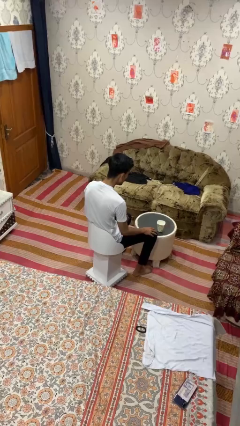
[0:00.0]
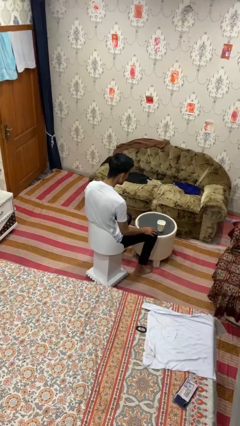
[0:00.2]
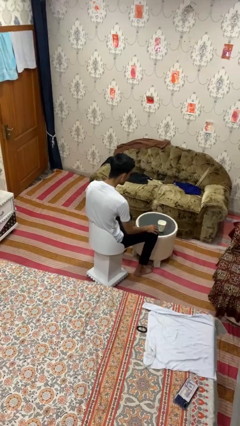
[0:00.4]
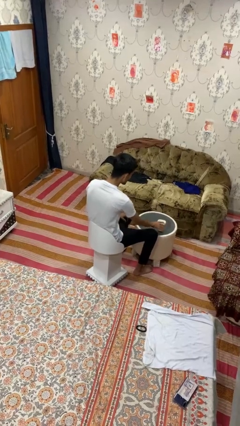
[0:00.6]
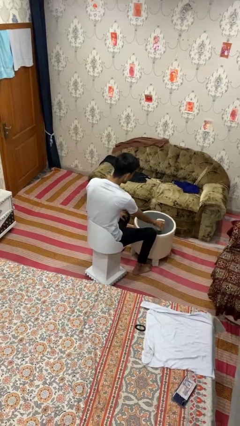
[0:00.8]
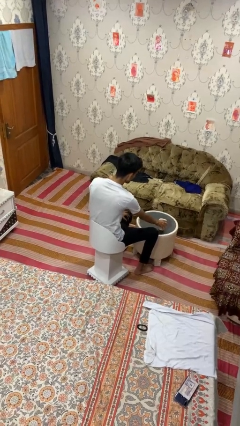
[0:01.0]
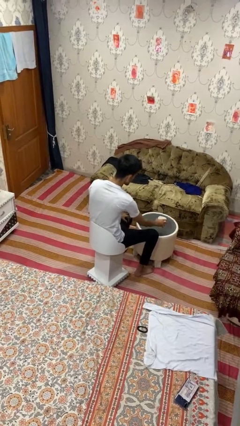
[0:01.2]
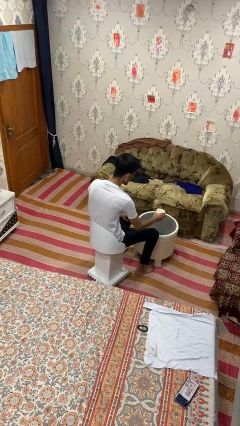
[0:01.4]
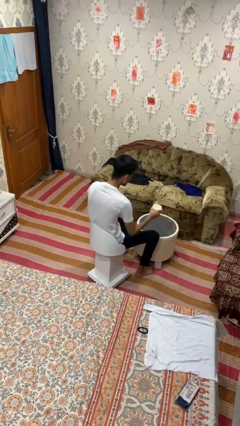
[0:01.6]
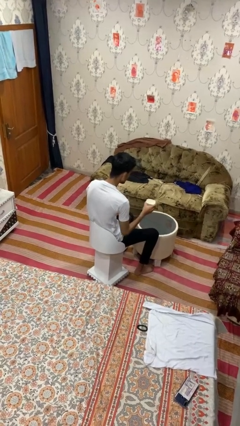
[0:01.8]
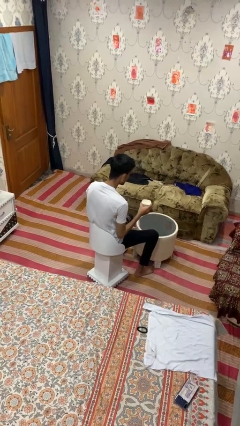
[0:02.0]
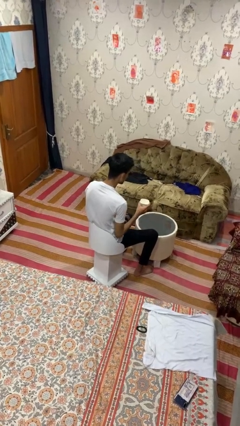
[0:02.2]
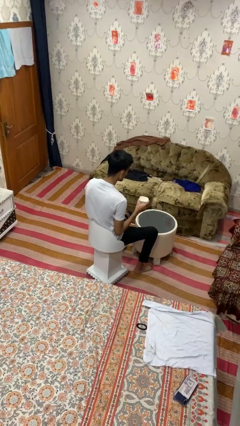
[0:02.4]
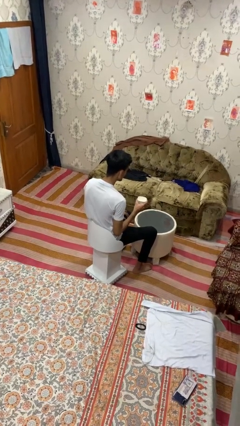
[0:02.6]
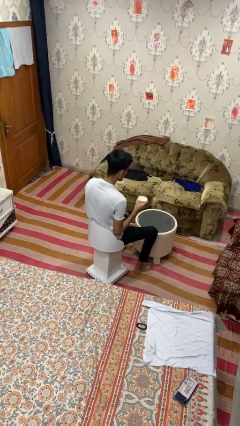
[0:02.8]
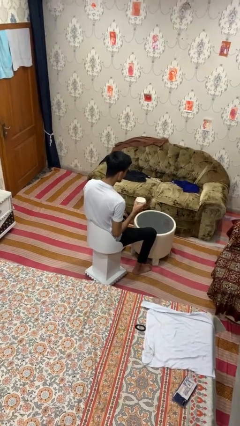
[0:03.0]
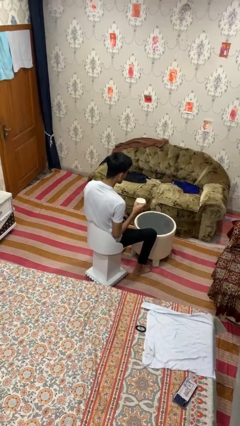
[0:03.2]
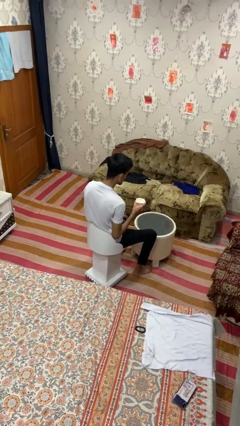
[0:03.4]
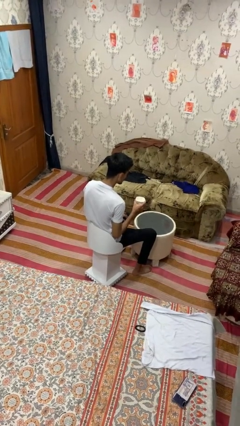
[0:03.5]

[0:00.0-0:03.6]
person picks up object from table

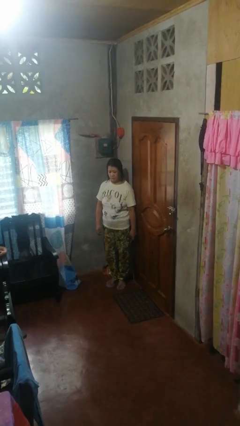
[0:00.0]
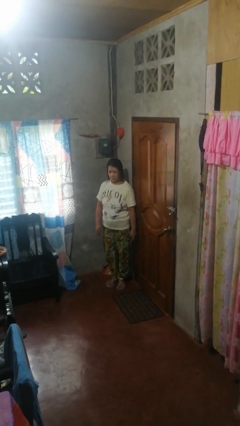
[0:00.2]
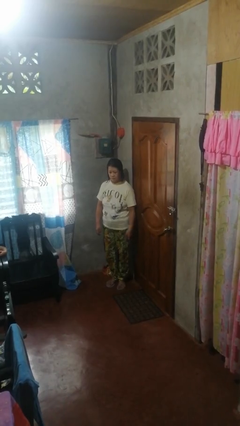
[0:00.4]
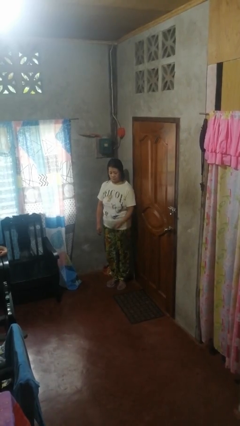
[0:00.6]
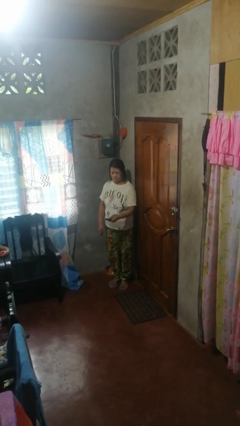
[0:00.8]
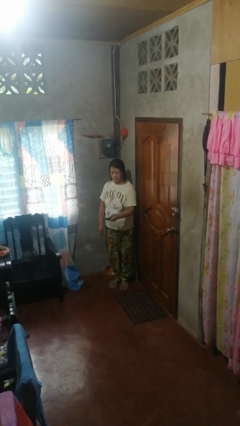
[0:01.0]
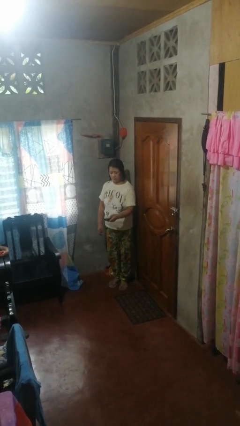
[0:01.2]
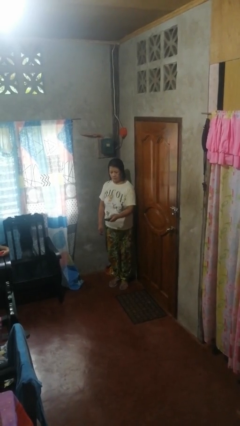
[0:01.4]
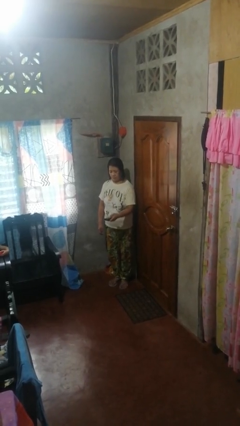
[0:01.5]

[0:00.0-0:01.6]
person uses television remote

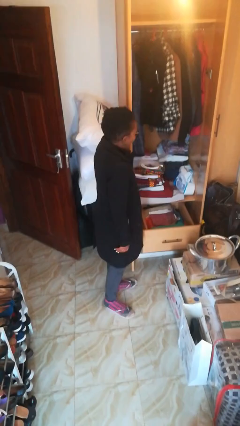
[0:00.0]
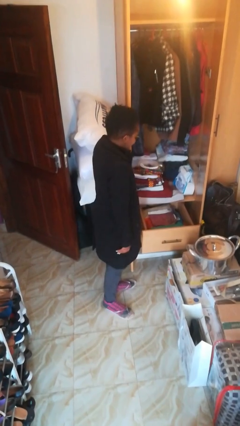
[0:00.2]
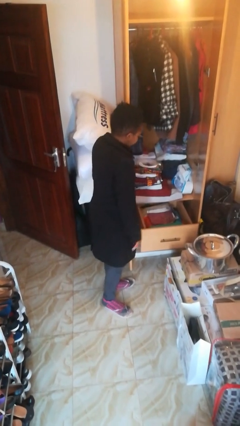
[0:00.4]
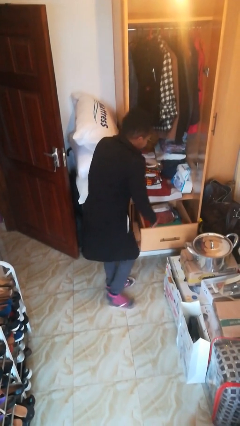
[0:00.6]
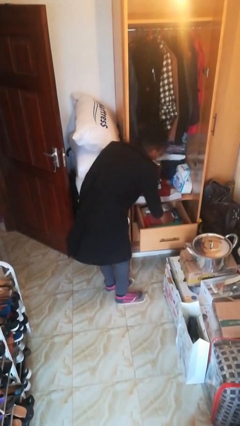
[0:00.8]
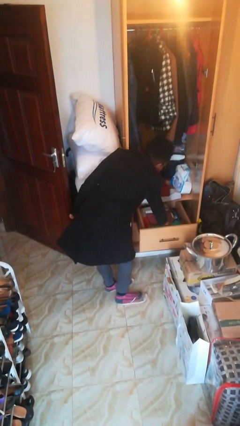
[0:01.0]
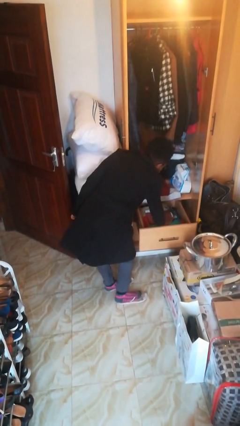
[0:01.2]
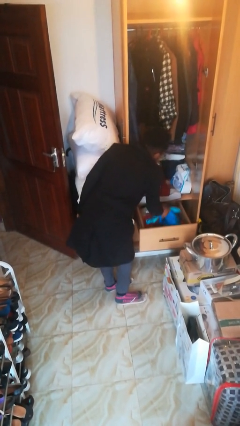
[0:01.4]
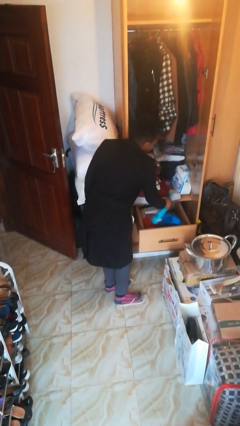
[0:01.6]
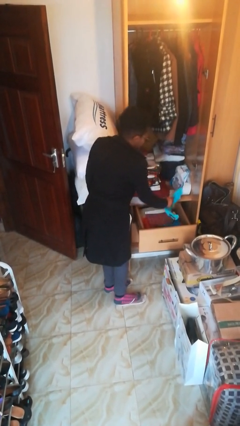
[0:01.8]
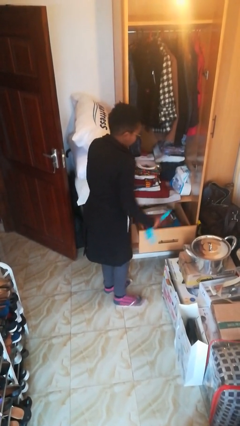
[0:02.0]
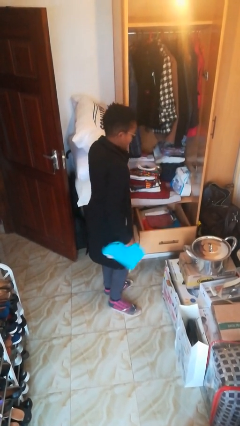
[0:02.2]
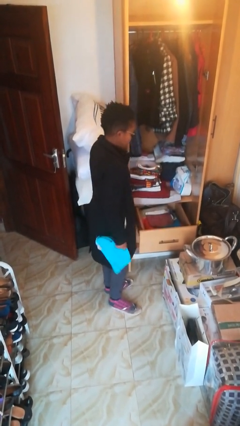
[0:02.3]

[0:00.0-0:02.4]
person takes clothes from dresser

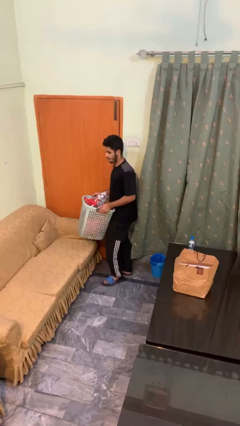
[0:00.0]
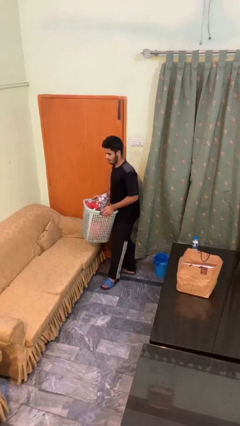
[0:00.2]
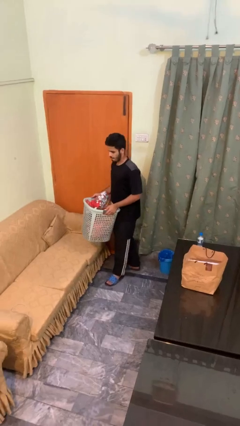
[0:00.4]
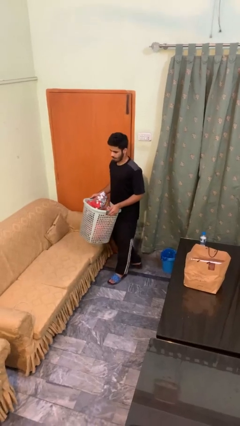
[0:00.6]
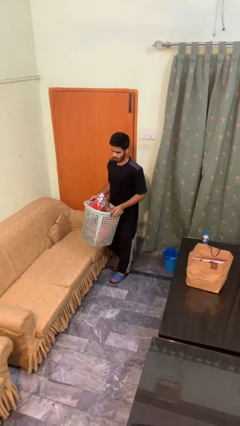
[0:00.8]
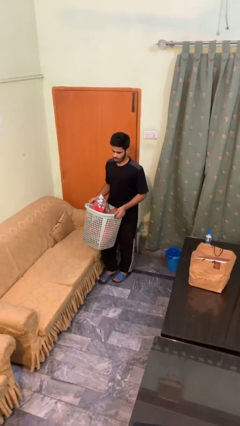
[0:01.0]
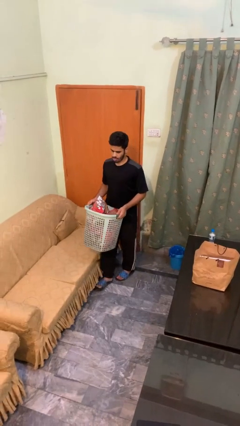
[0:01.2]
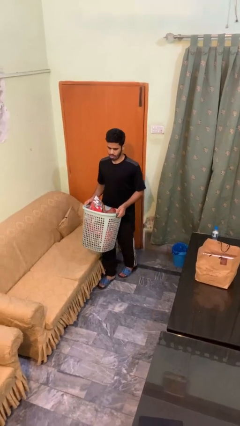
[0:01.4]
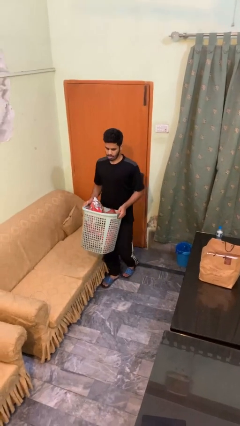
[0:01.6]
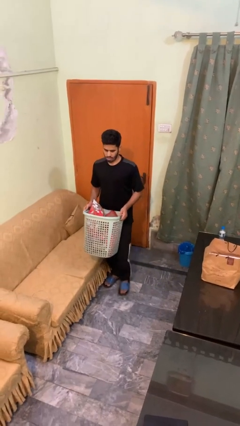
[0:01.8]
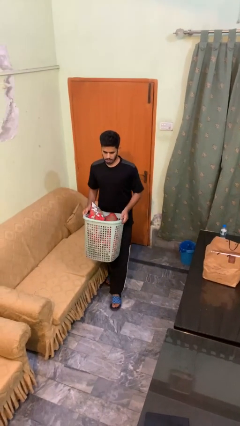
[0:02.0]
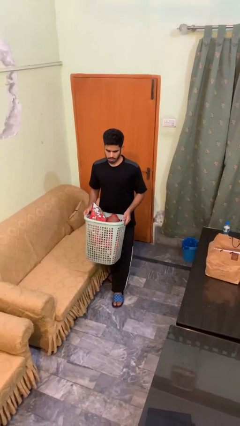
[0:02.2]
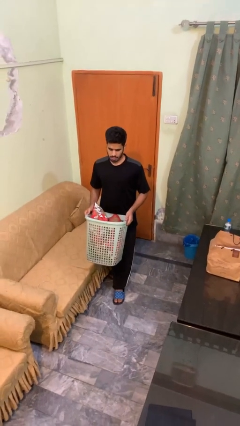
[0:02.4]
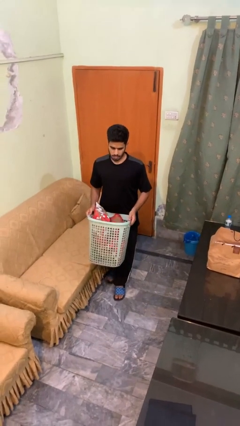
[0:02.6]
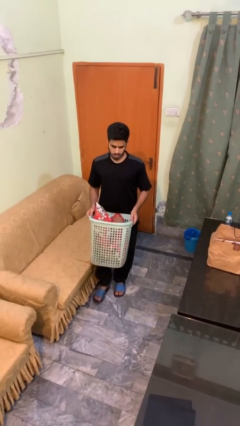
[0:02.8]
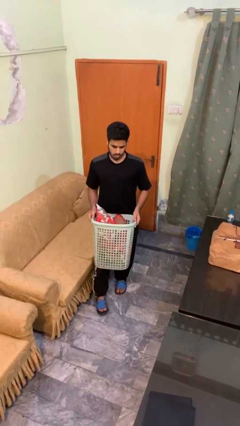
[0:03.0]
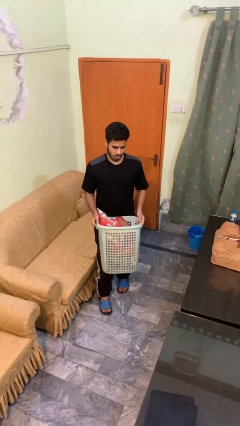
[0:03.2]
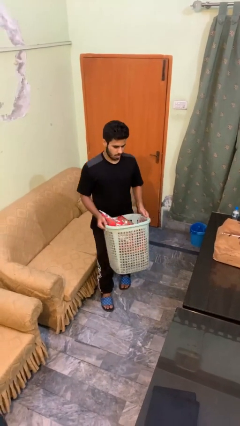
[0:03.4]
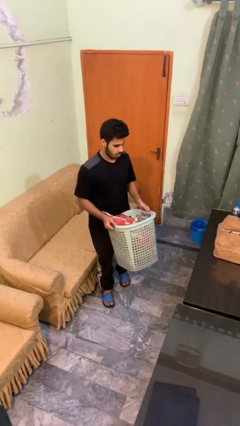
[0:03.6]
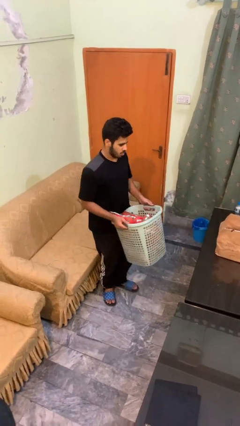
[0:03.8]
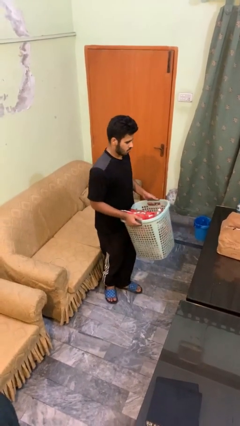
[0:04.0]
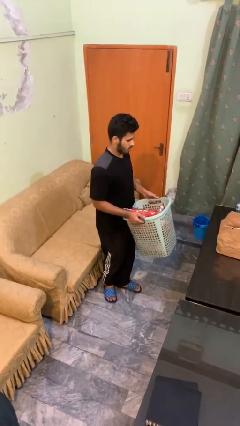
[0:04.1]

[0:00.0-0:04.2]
person carries laundry basket

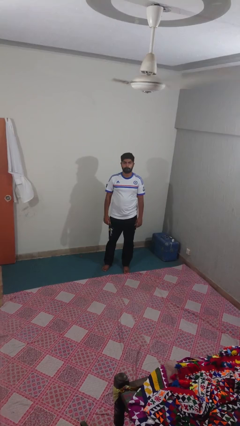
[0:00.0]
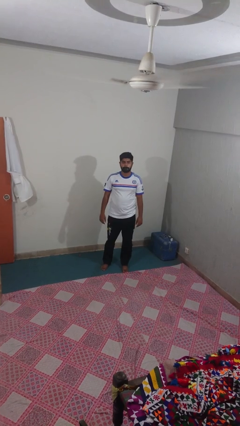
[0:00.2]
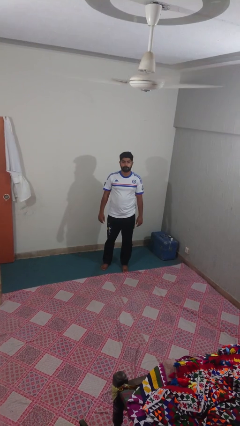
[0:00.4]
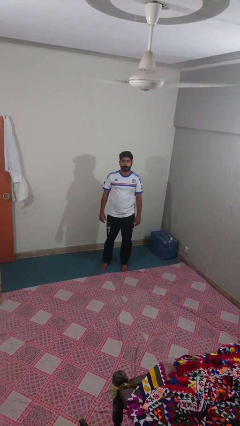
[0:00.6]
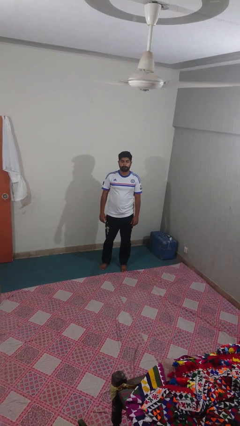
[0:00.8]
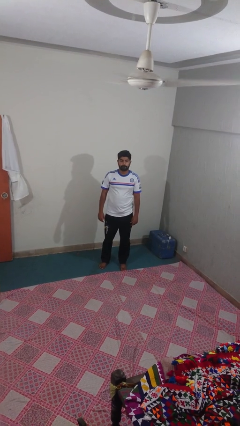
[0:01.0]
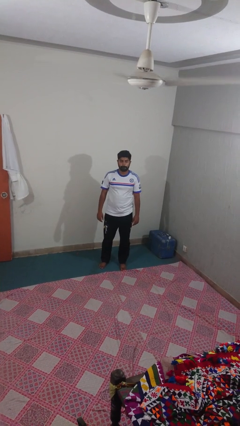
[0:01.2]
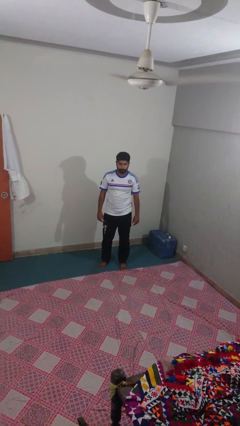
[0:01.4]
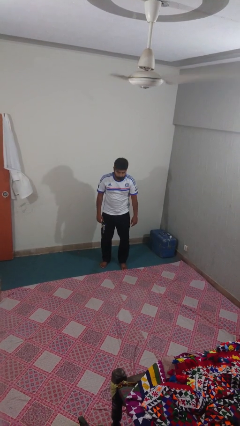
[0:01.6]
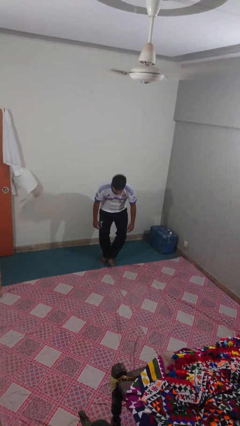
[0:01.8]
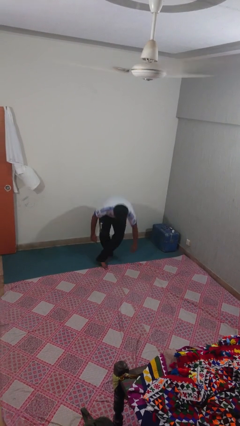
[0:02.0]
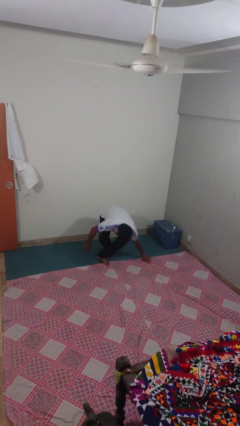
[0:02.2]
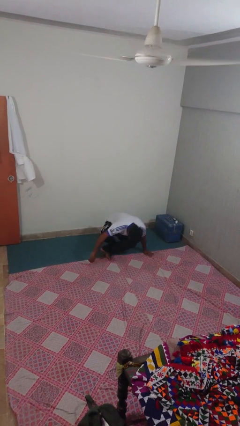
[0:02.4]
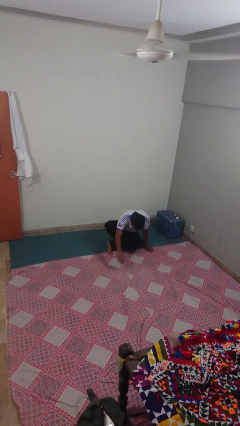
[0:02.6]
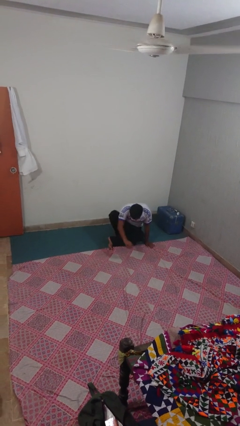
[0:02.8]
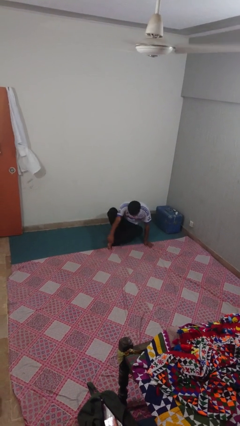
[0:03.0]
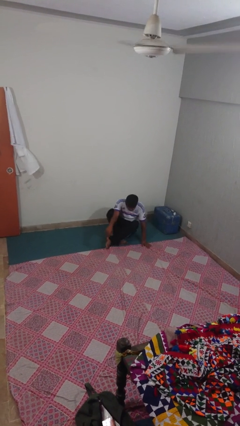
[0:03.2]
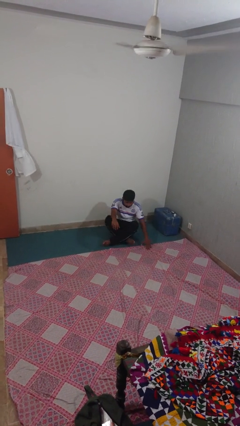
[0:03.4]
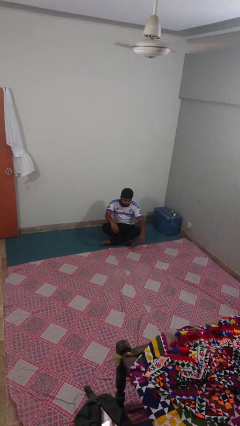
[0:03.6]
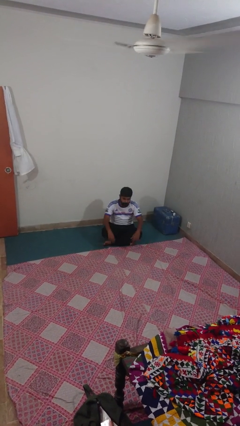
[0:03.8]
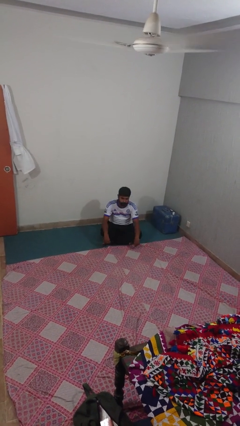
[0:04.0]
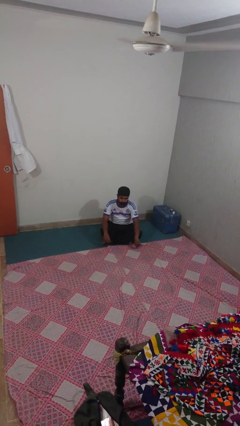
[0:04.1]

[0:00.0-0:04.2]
person sits crisscross

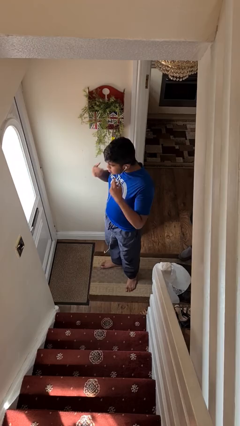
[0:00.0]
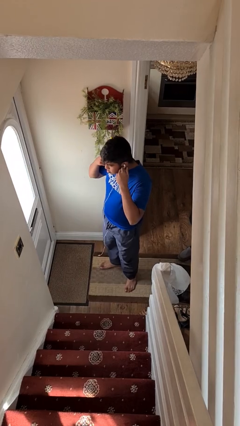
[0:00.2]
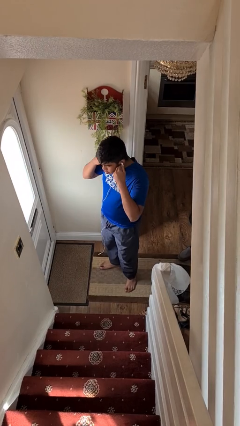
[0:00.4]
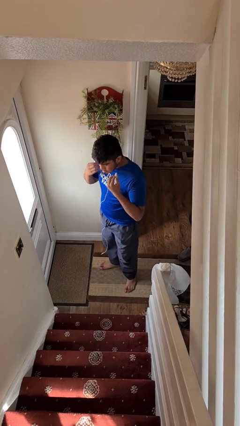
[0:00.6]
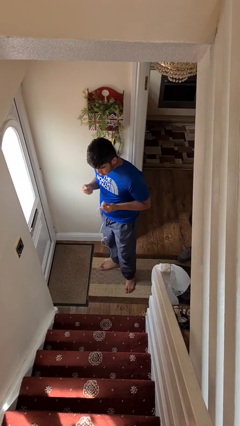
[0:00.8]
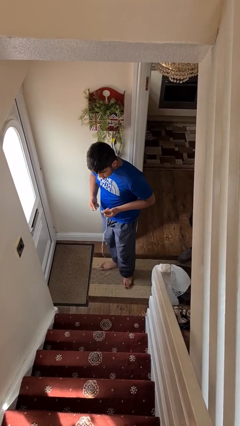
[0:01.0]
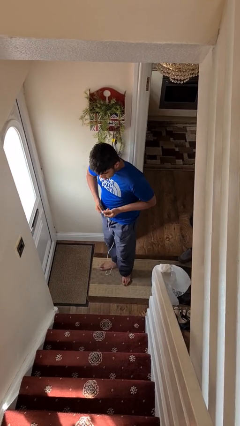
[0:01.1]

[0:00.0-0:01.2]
person takes off headphones

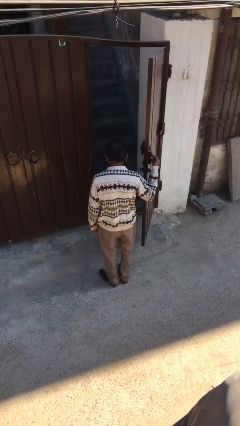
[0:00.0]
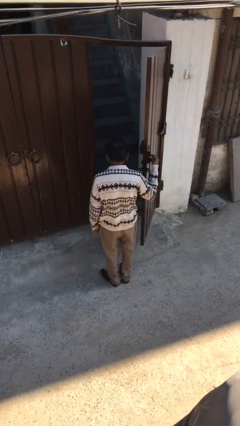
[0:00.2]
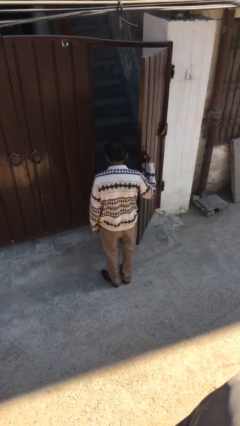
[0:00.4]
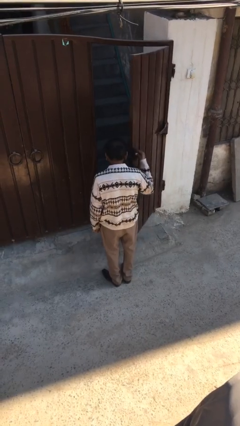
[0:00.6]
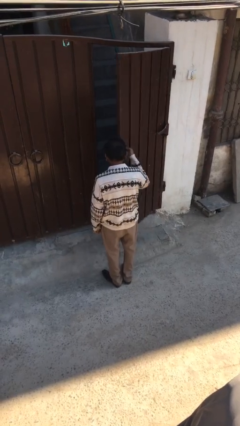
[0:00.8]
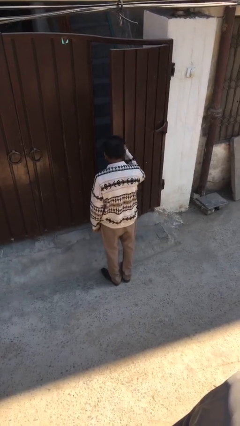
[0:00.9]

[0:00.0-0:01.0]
person closes facility door
